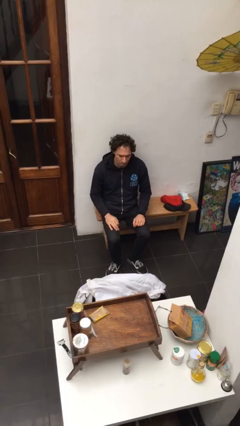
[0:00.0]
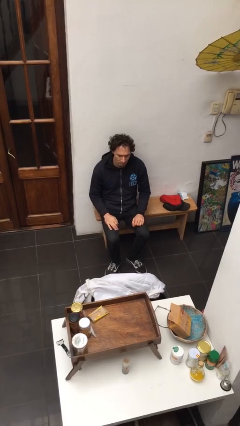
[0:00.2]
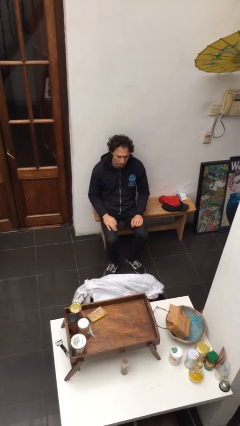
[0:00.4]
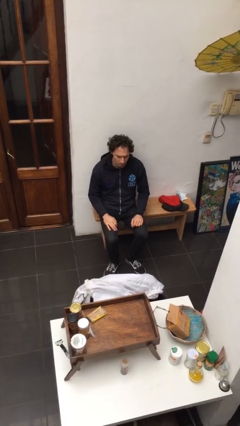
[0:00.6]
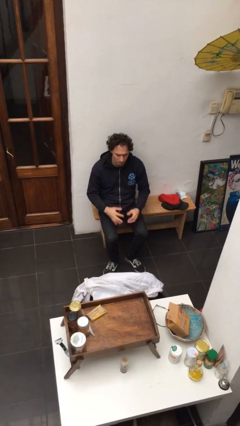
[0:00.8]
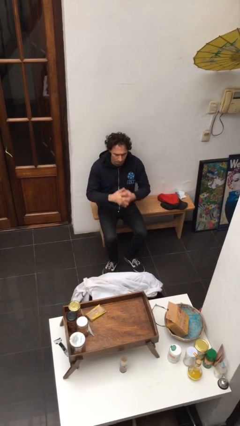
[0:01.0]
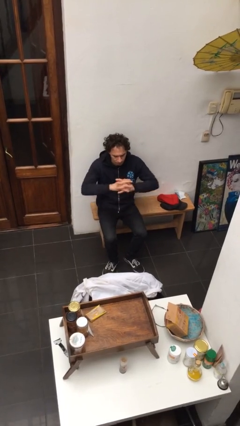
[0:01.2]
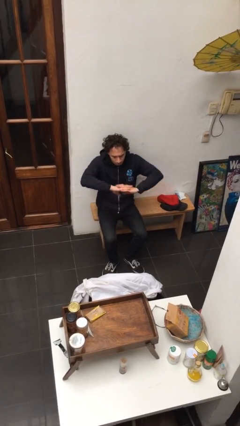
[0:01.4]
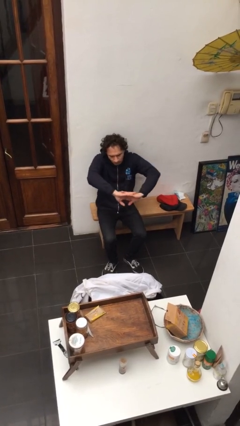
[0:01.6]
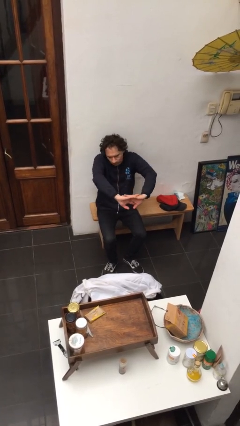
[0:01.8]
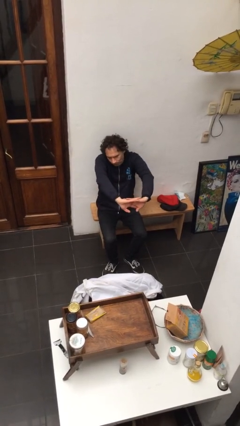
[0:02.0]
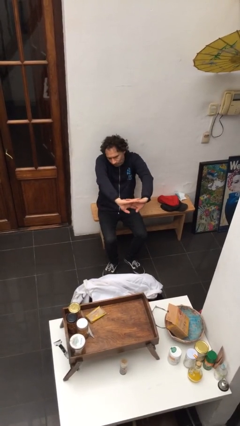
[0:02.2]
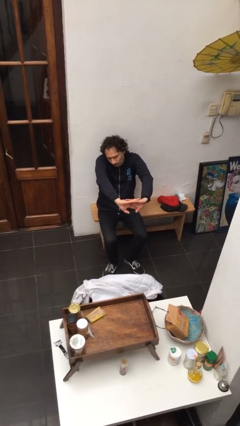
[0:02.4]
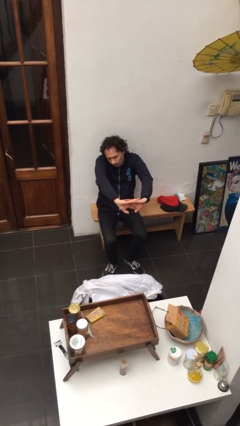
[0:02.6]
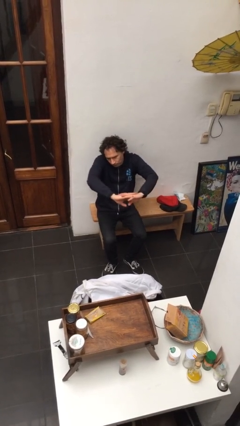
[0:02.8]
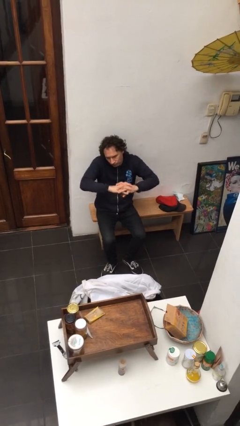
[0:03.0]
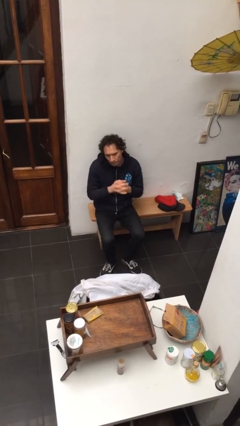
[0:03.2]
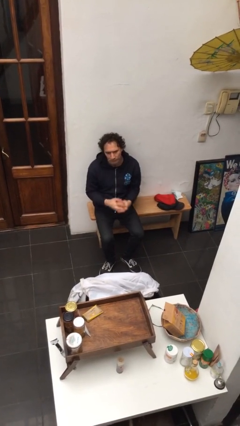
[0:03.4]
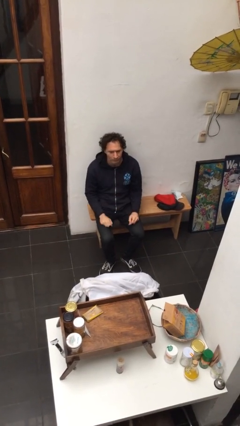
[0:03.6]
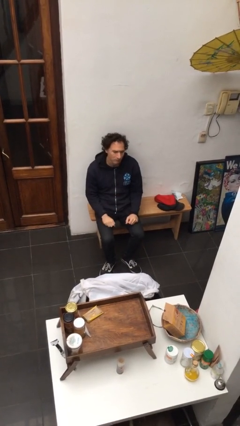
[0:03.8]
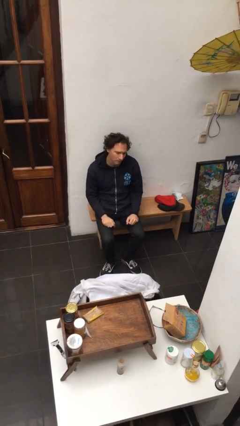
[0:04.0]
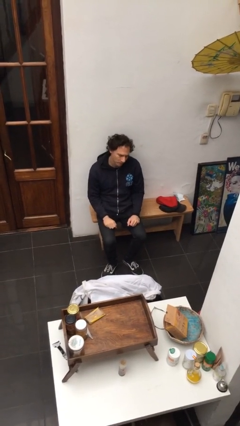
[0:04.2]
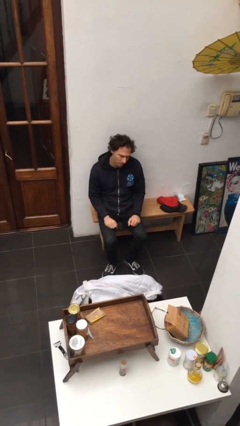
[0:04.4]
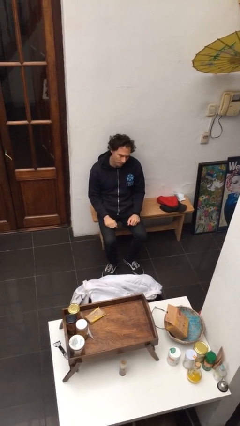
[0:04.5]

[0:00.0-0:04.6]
person cracks knuckles

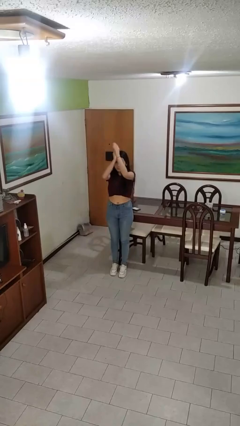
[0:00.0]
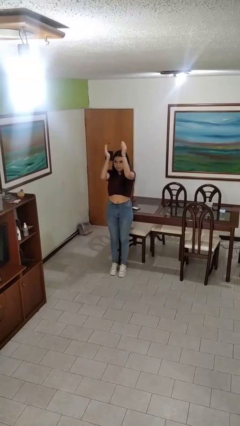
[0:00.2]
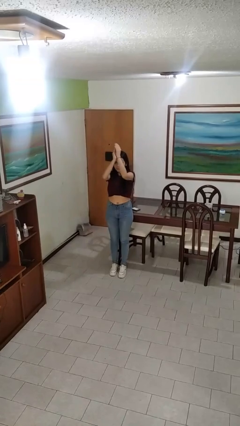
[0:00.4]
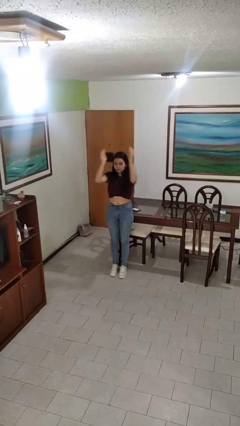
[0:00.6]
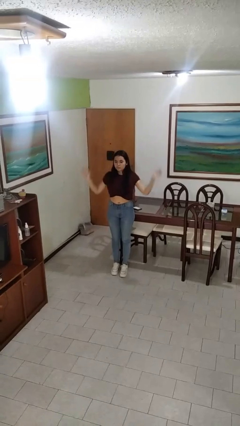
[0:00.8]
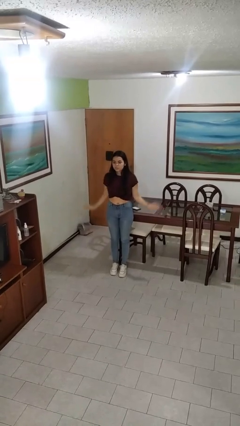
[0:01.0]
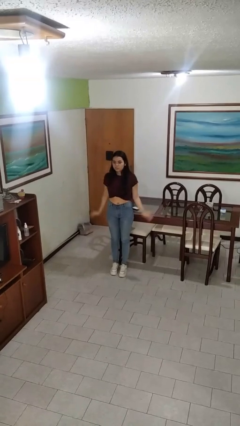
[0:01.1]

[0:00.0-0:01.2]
person claps hands

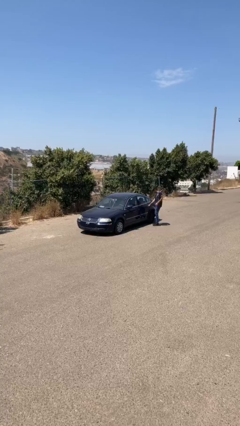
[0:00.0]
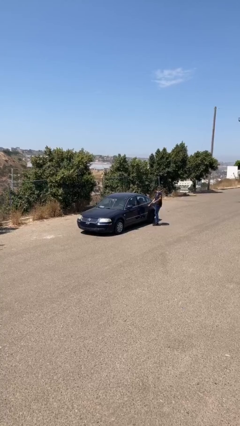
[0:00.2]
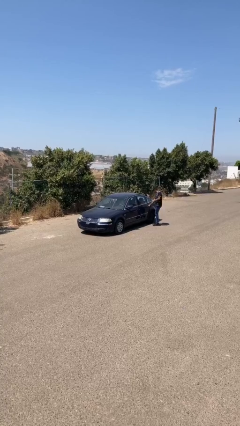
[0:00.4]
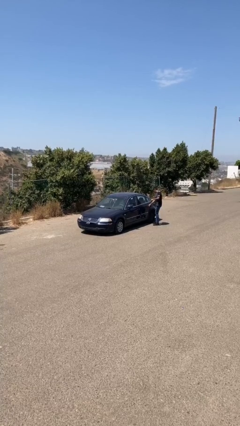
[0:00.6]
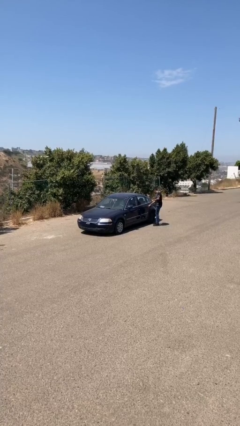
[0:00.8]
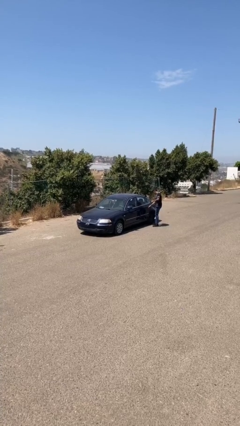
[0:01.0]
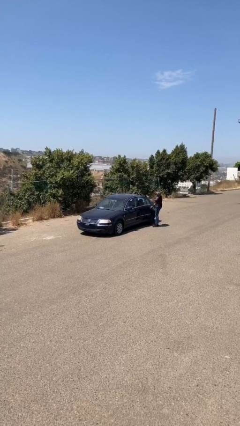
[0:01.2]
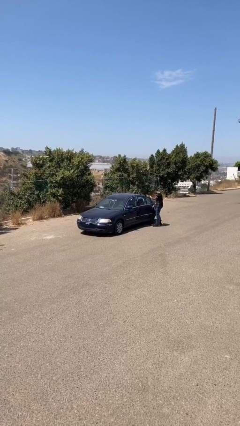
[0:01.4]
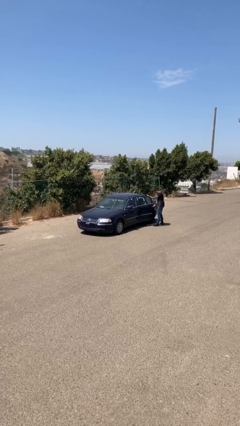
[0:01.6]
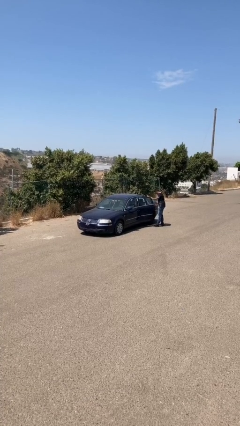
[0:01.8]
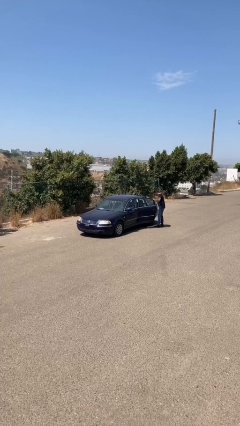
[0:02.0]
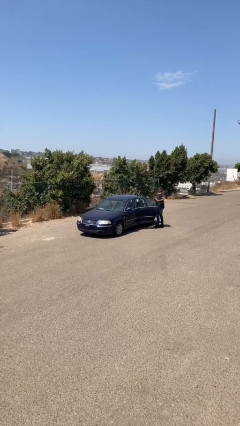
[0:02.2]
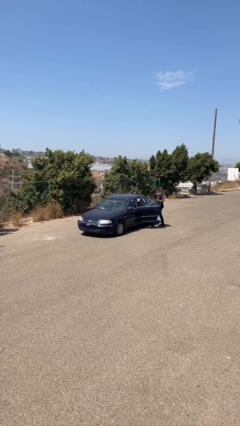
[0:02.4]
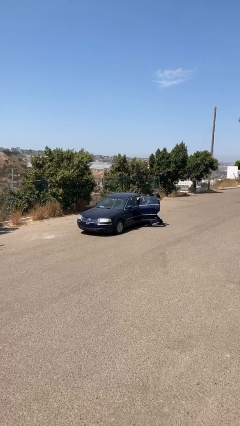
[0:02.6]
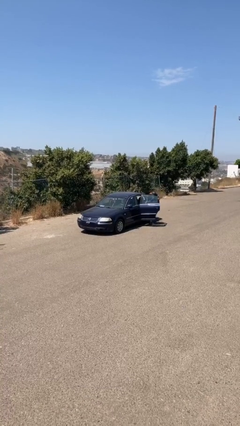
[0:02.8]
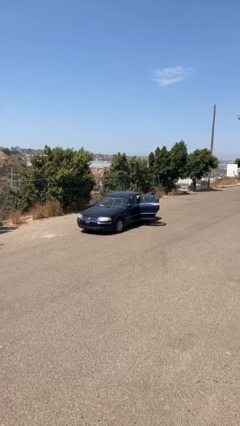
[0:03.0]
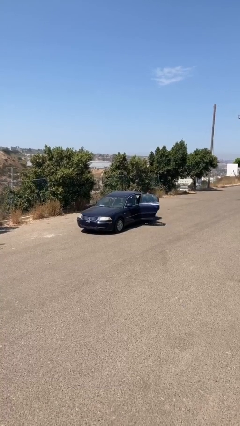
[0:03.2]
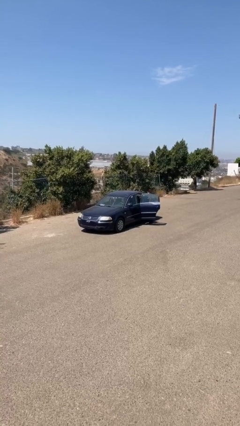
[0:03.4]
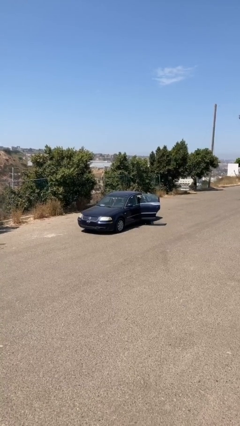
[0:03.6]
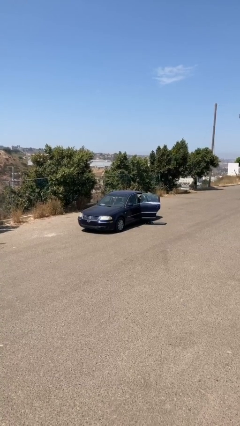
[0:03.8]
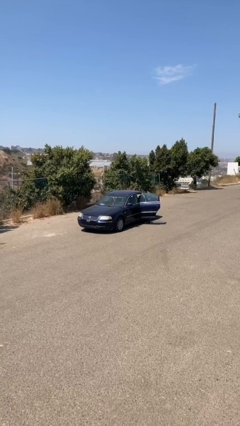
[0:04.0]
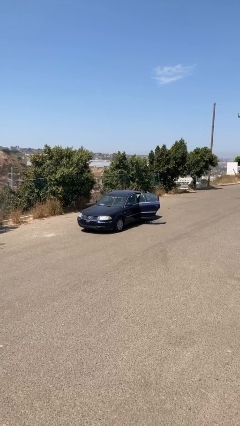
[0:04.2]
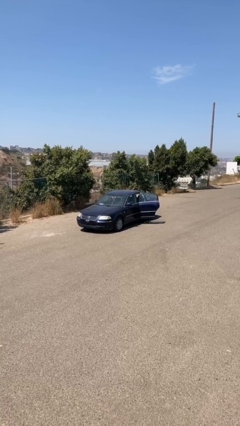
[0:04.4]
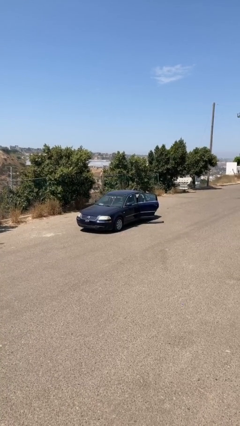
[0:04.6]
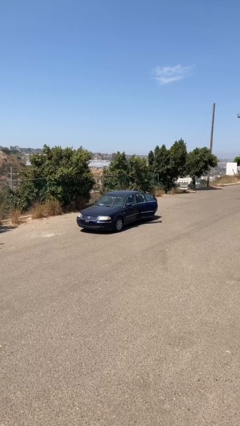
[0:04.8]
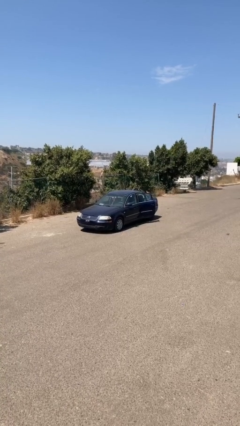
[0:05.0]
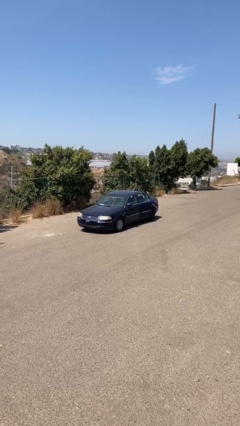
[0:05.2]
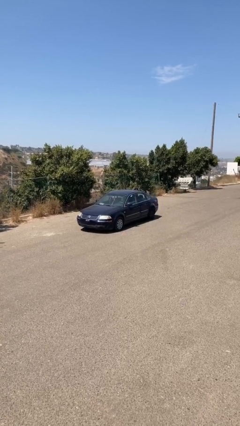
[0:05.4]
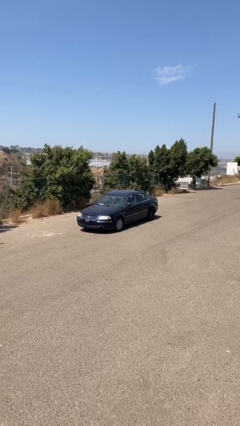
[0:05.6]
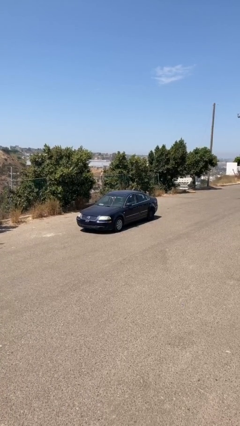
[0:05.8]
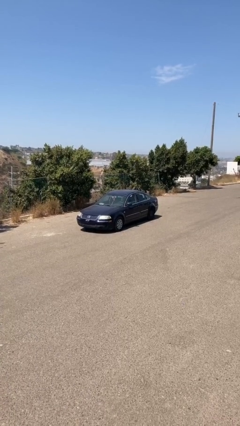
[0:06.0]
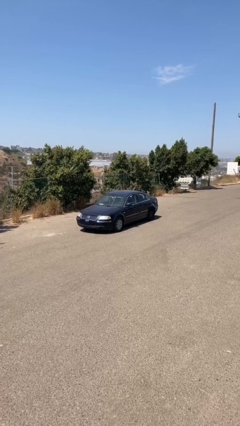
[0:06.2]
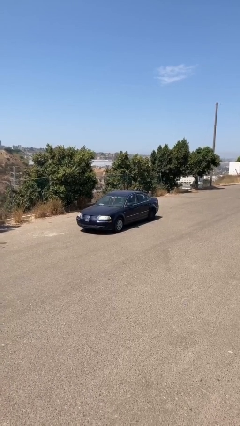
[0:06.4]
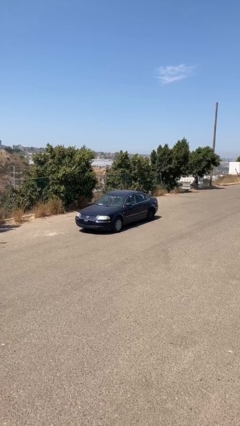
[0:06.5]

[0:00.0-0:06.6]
car picks up person

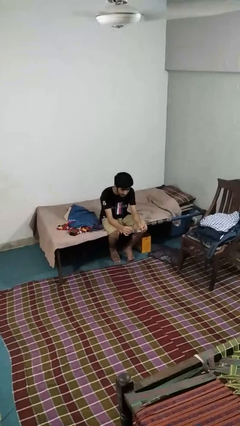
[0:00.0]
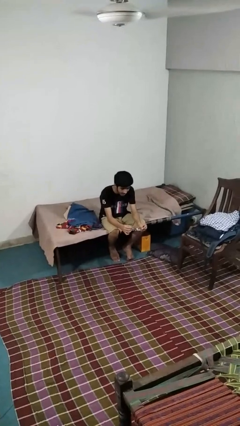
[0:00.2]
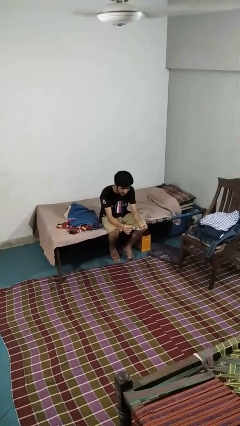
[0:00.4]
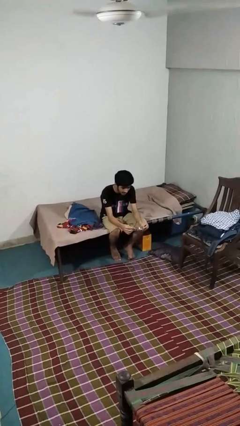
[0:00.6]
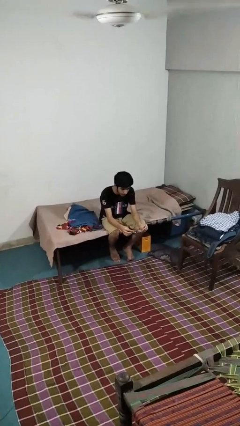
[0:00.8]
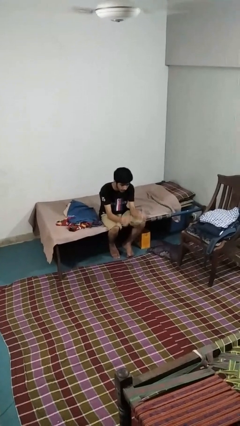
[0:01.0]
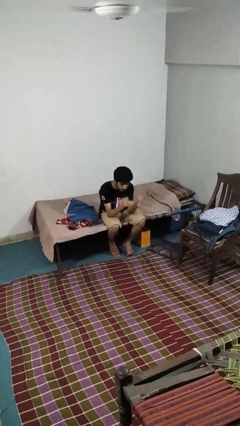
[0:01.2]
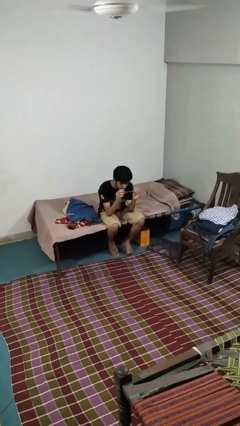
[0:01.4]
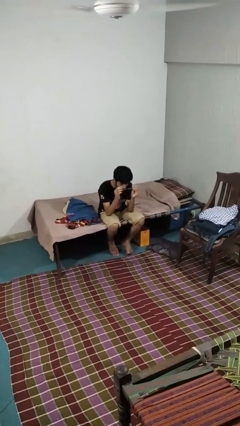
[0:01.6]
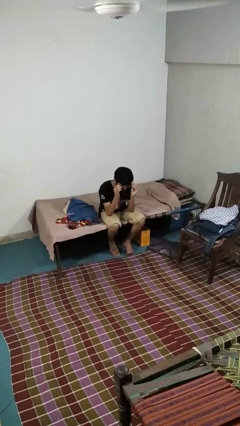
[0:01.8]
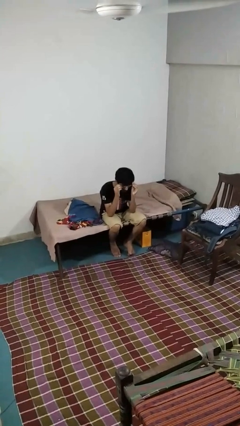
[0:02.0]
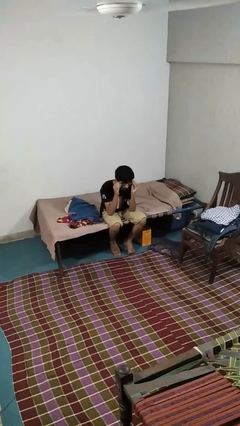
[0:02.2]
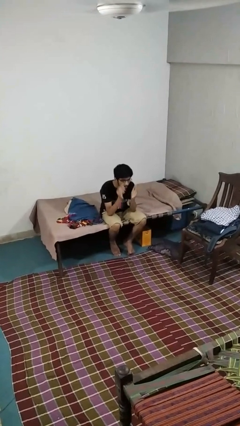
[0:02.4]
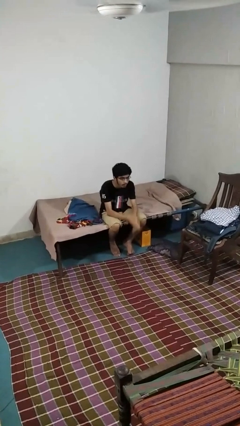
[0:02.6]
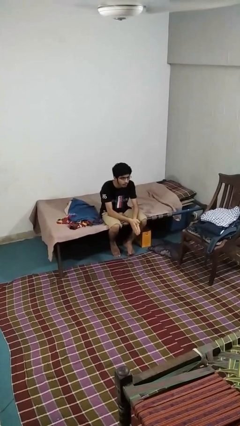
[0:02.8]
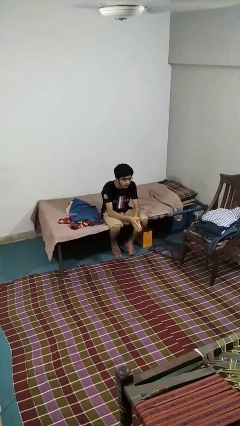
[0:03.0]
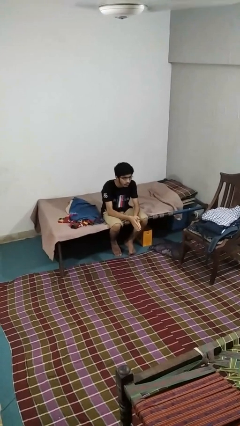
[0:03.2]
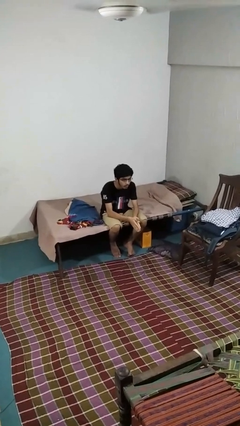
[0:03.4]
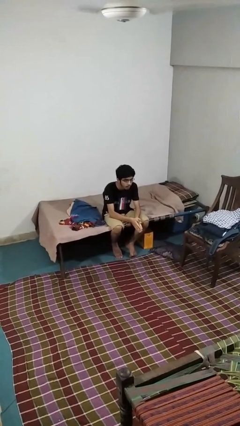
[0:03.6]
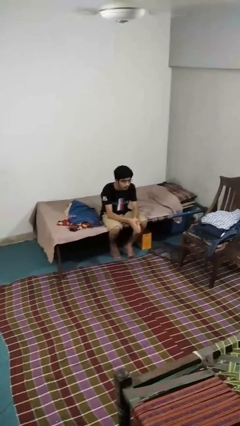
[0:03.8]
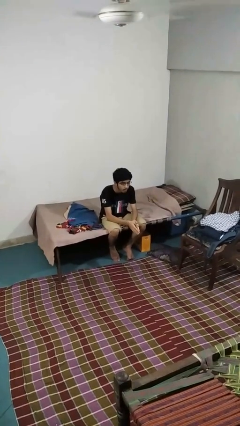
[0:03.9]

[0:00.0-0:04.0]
person puts on glasses

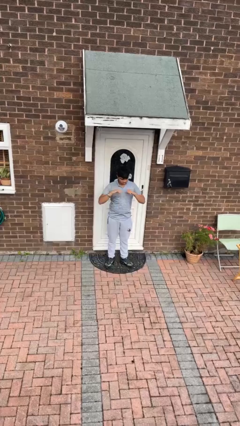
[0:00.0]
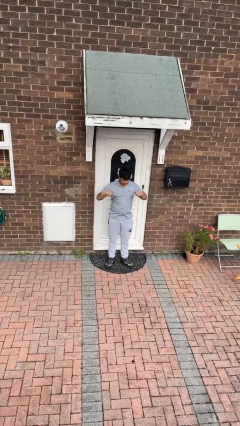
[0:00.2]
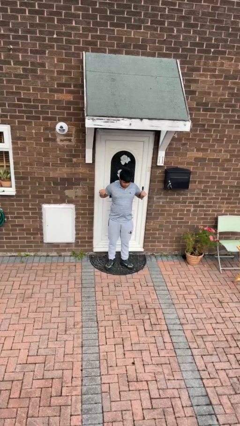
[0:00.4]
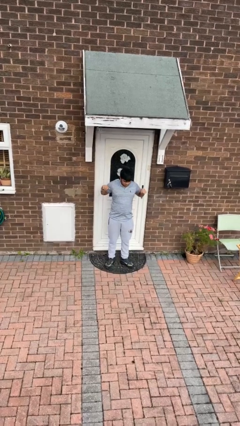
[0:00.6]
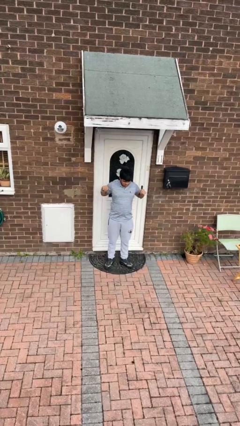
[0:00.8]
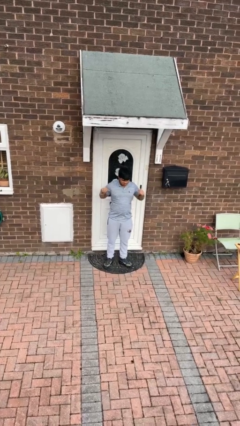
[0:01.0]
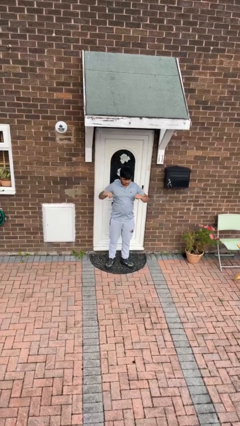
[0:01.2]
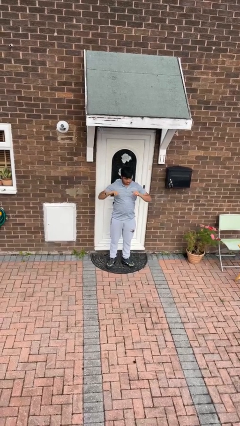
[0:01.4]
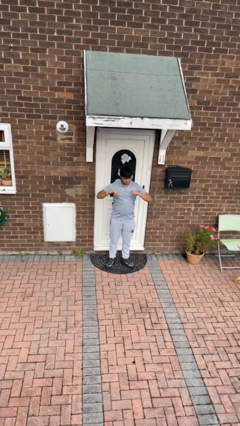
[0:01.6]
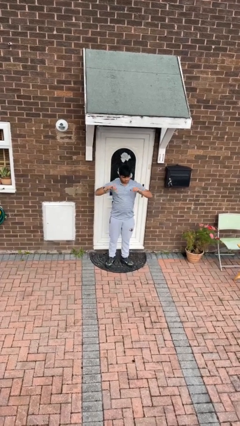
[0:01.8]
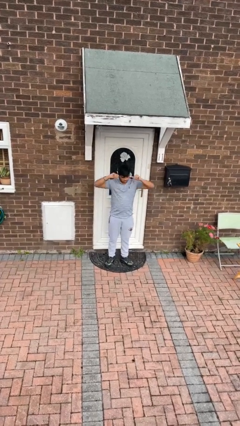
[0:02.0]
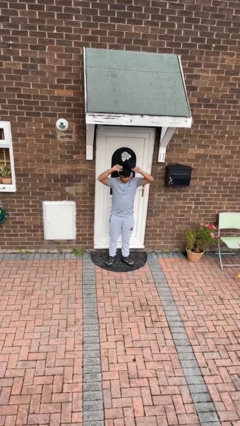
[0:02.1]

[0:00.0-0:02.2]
person stretches arms to side
